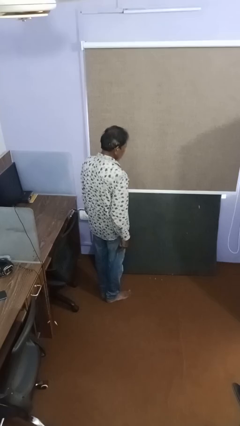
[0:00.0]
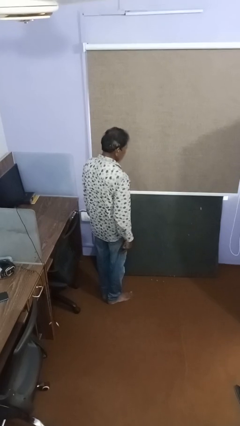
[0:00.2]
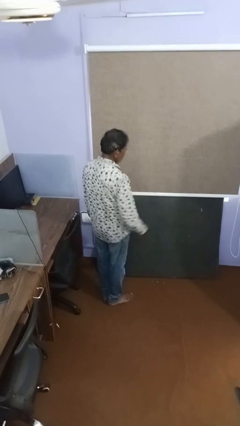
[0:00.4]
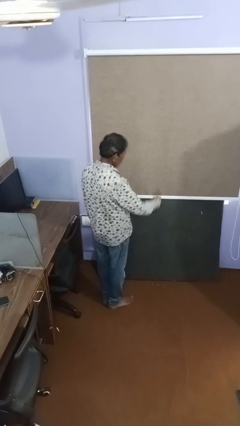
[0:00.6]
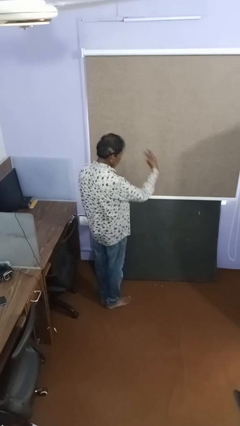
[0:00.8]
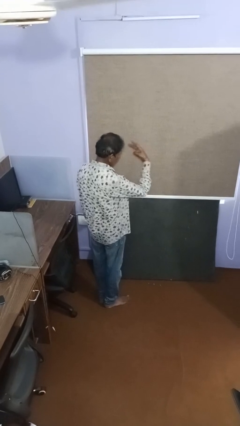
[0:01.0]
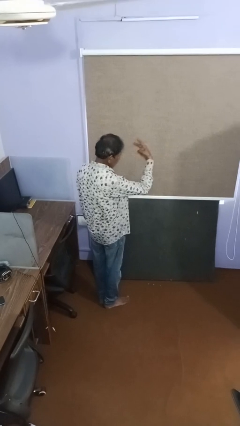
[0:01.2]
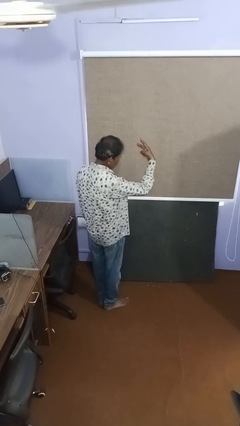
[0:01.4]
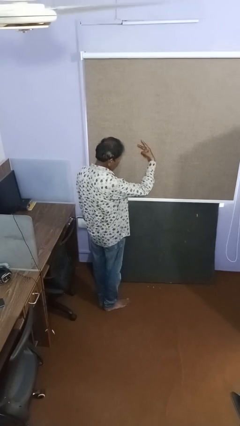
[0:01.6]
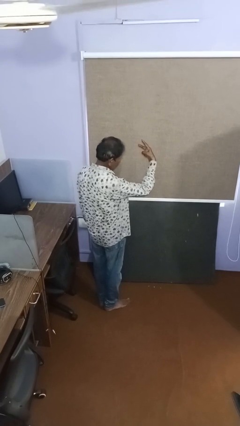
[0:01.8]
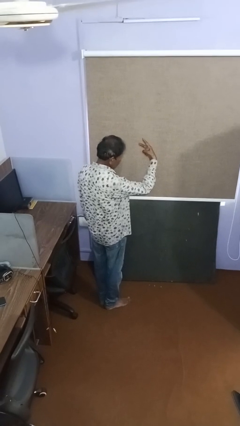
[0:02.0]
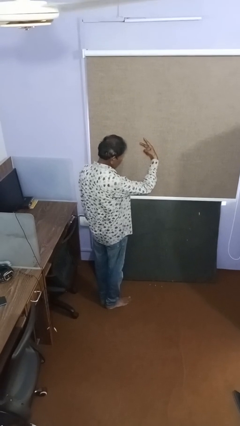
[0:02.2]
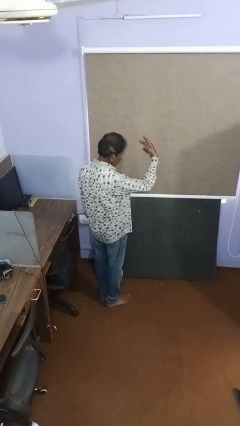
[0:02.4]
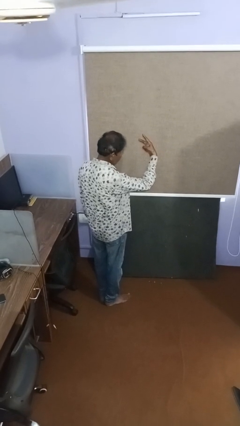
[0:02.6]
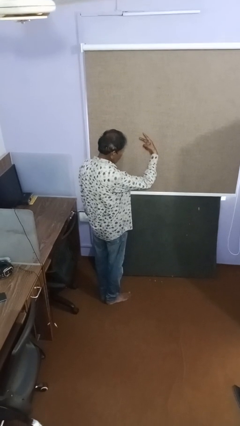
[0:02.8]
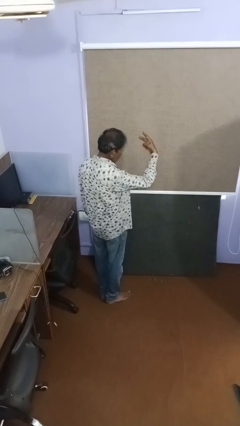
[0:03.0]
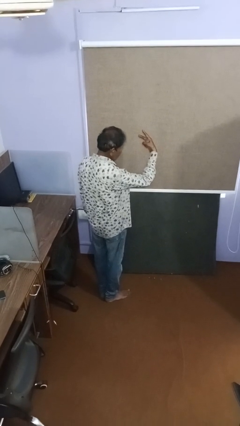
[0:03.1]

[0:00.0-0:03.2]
person gestures peace

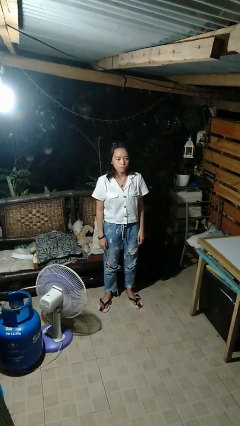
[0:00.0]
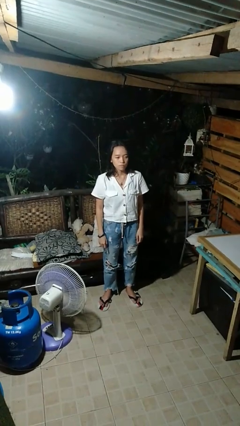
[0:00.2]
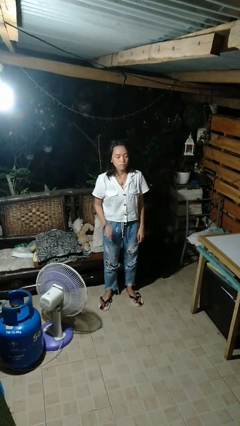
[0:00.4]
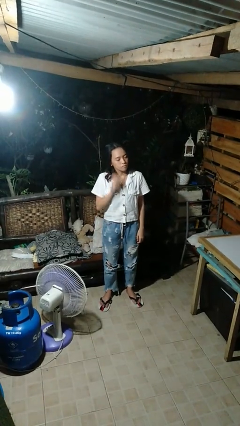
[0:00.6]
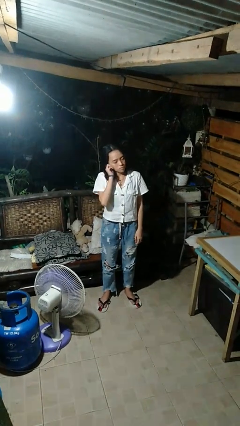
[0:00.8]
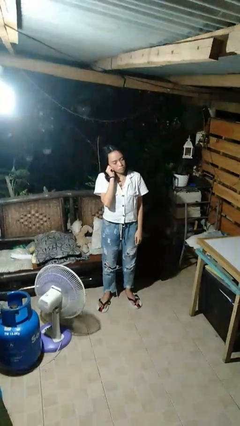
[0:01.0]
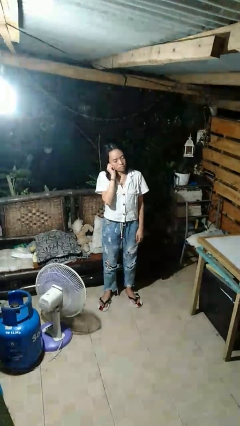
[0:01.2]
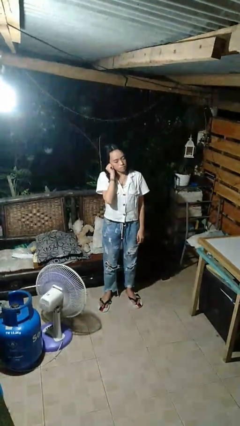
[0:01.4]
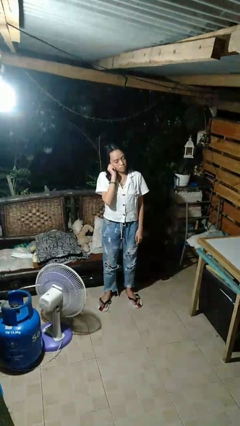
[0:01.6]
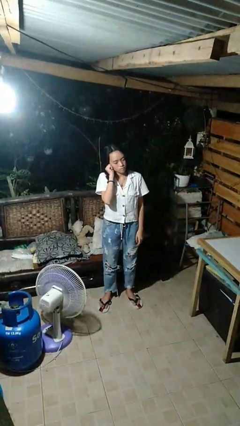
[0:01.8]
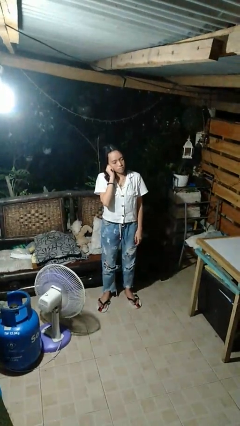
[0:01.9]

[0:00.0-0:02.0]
person touches earlobe

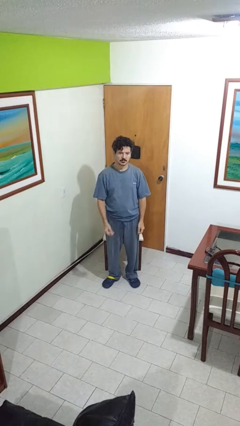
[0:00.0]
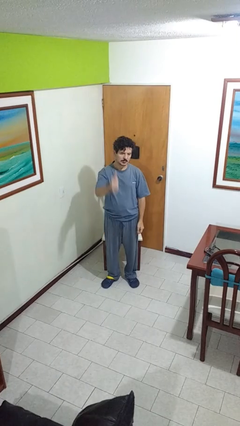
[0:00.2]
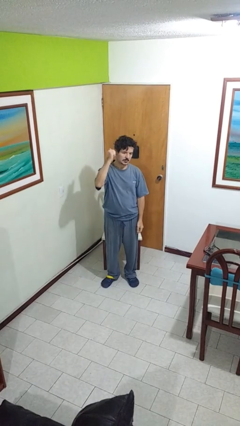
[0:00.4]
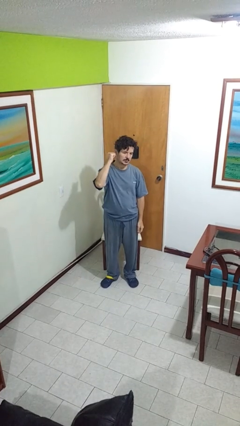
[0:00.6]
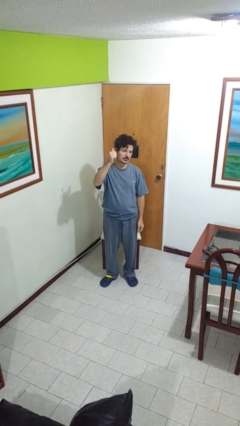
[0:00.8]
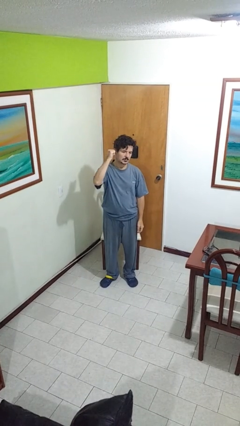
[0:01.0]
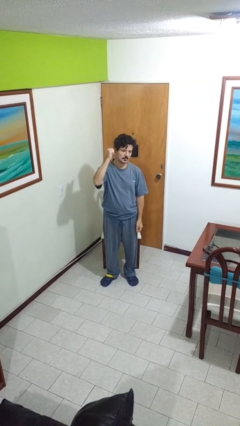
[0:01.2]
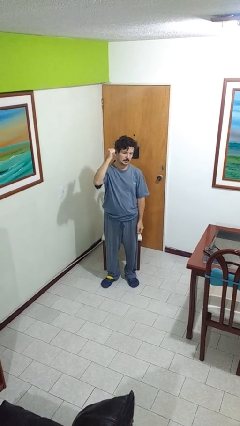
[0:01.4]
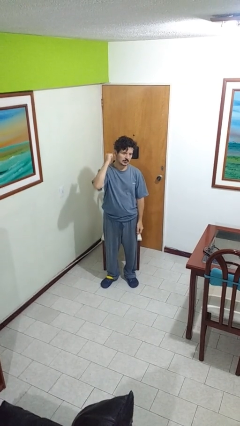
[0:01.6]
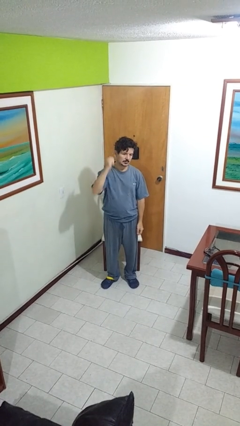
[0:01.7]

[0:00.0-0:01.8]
person gestures behind me

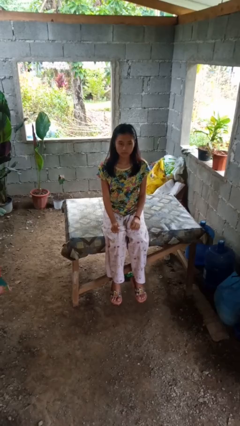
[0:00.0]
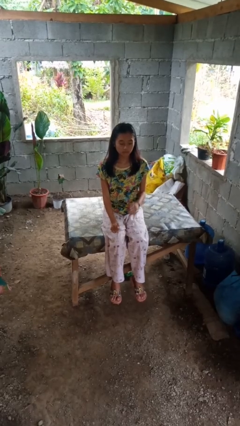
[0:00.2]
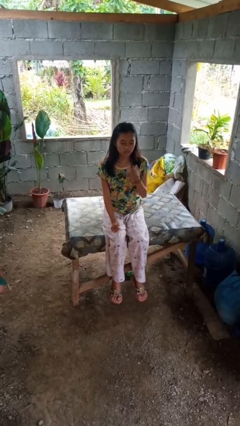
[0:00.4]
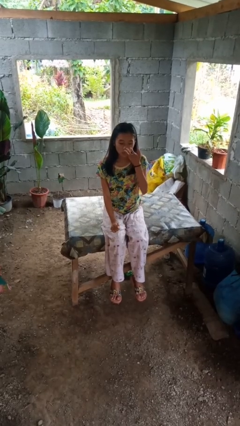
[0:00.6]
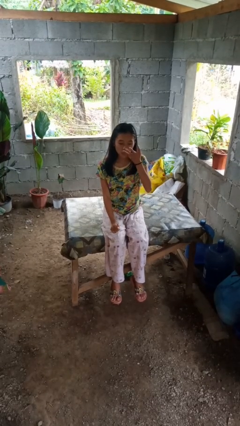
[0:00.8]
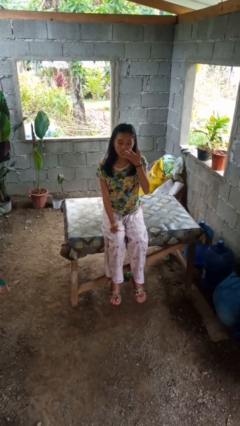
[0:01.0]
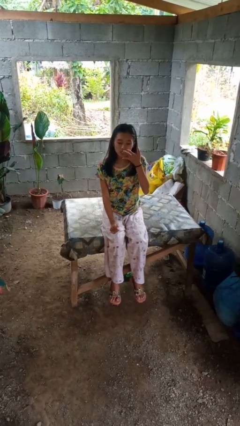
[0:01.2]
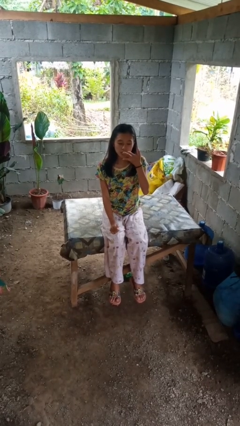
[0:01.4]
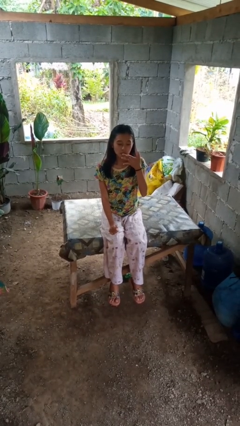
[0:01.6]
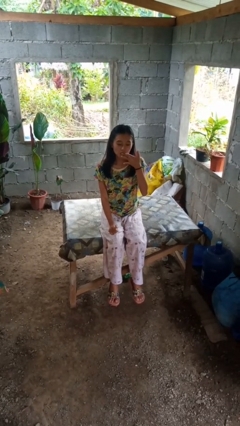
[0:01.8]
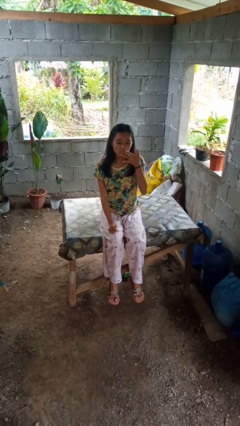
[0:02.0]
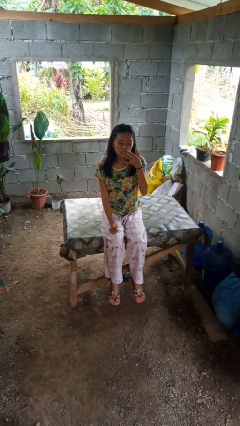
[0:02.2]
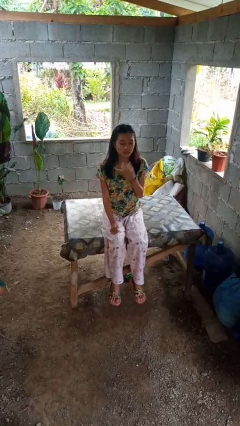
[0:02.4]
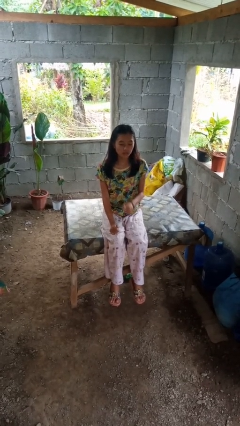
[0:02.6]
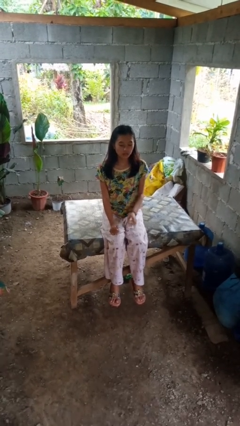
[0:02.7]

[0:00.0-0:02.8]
person licks fingers

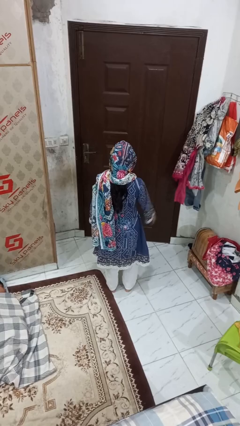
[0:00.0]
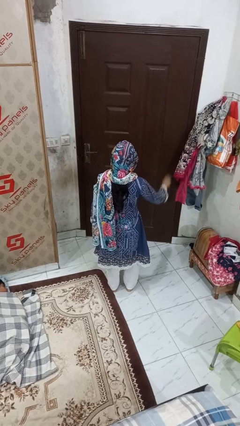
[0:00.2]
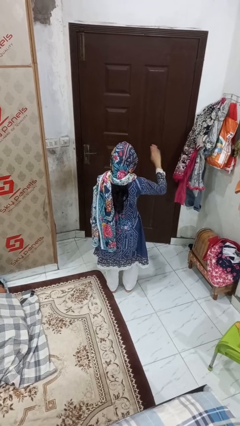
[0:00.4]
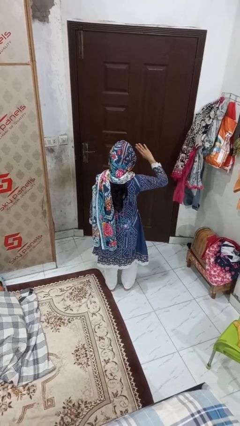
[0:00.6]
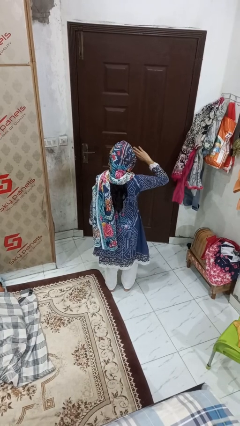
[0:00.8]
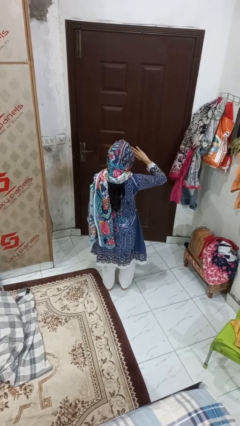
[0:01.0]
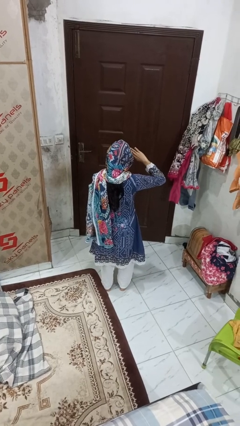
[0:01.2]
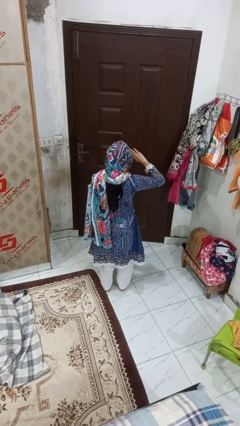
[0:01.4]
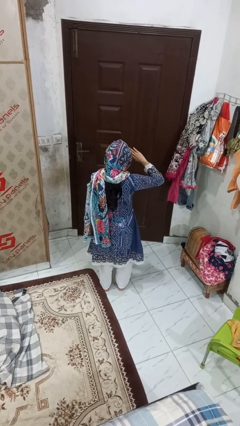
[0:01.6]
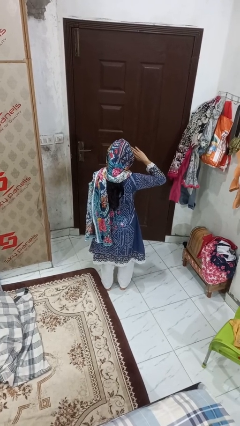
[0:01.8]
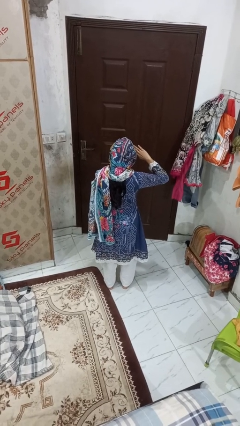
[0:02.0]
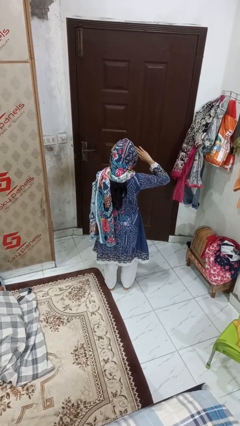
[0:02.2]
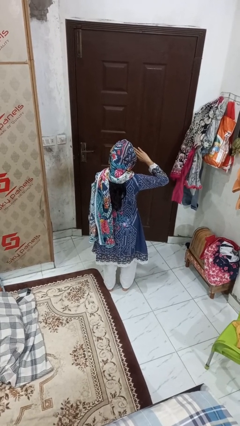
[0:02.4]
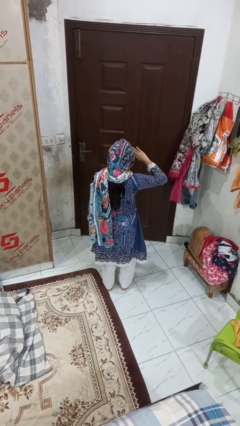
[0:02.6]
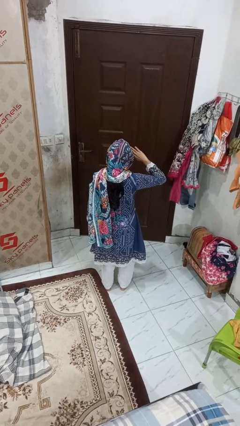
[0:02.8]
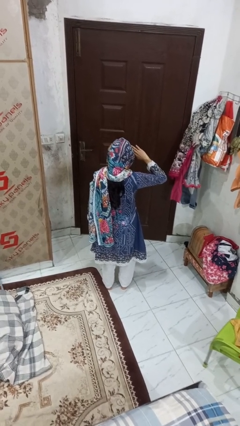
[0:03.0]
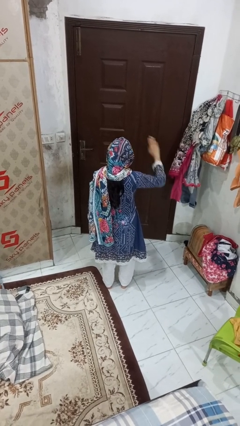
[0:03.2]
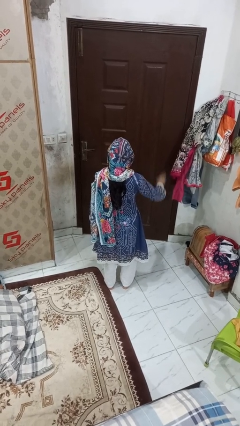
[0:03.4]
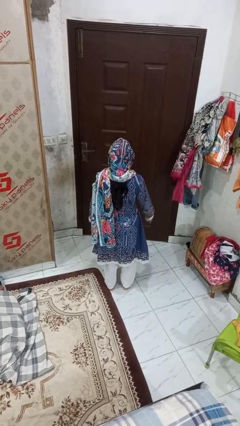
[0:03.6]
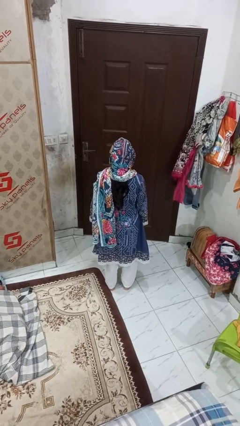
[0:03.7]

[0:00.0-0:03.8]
person salutes

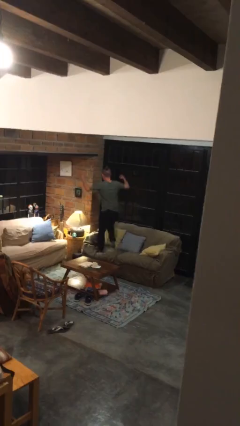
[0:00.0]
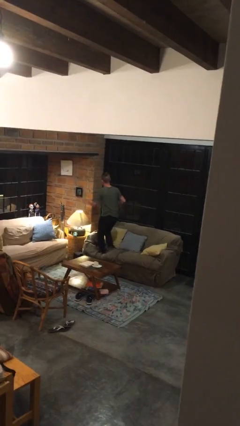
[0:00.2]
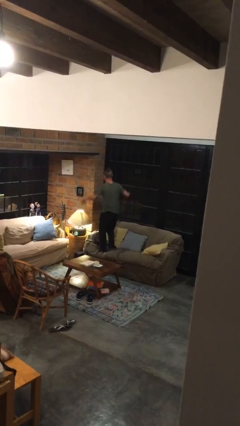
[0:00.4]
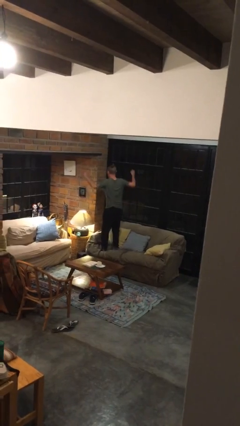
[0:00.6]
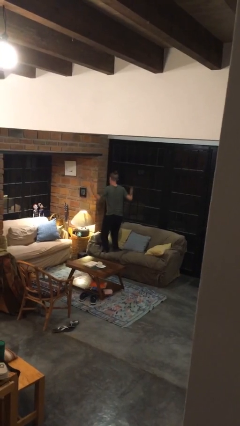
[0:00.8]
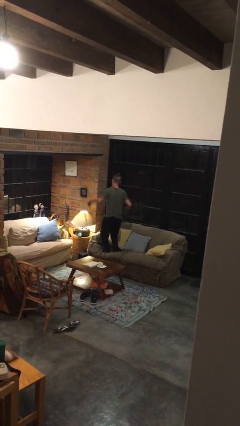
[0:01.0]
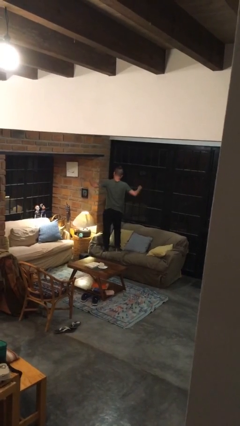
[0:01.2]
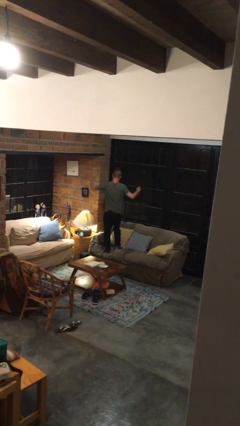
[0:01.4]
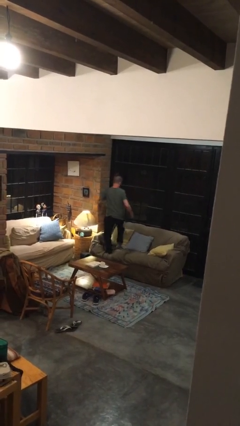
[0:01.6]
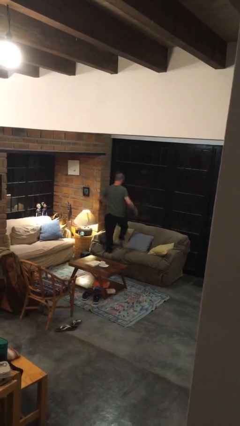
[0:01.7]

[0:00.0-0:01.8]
person jumps on couch

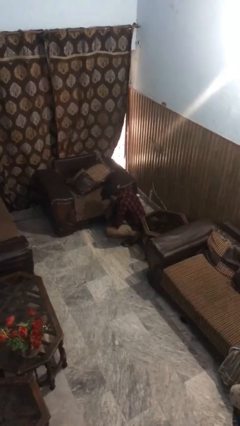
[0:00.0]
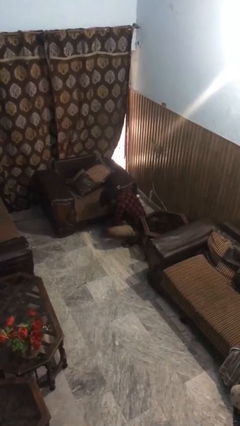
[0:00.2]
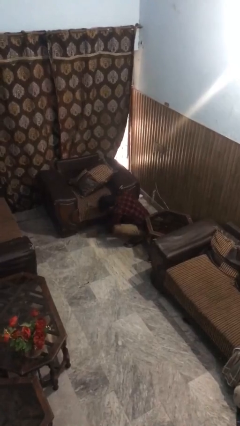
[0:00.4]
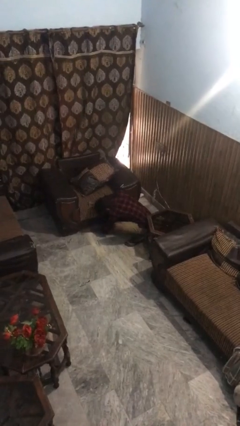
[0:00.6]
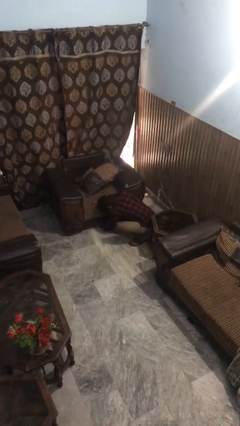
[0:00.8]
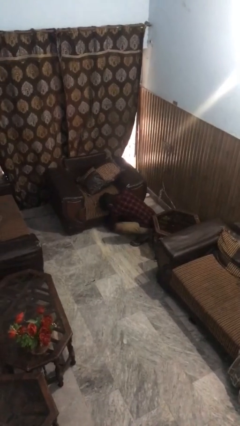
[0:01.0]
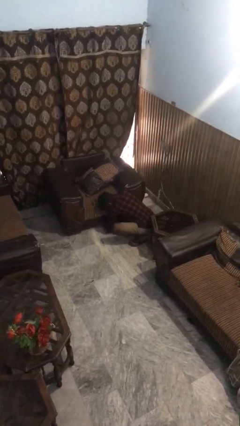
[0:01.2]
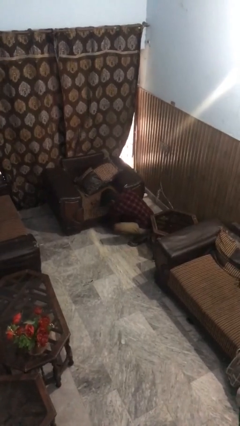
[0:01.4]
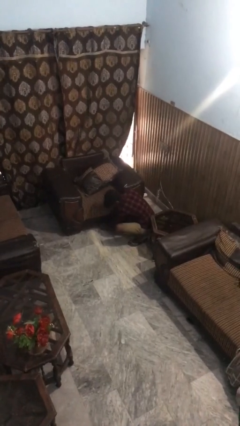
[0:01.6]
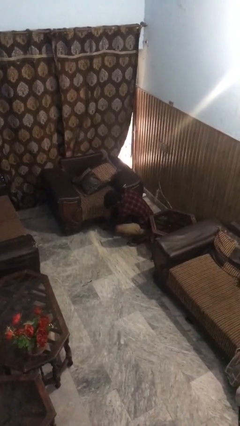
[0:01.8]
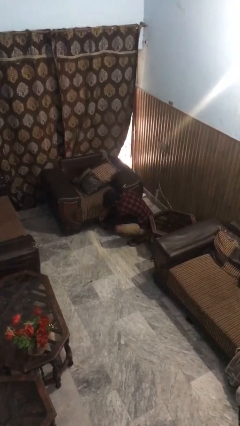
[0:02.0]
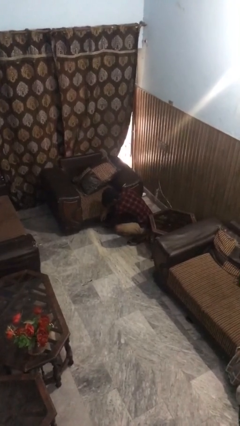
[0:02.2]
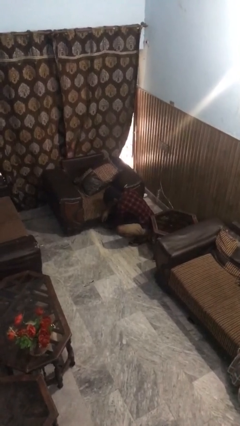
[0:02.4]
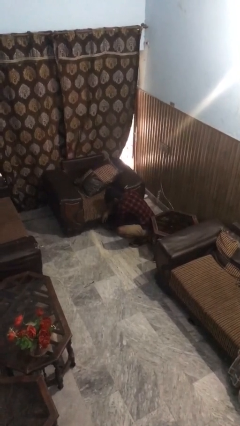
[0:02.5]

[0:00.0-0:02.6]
person searches under couch
